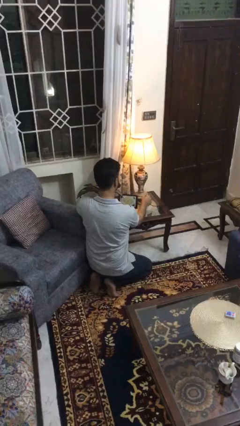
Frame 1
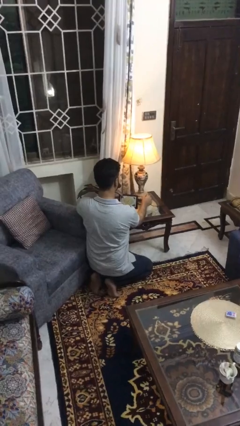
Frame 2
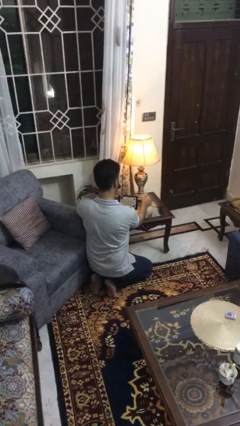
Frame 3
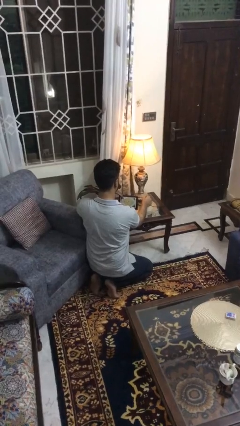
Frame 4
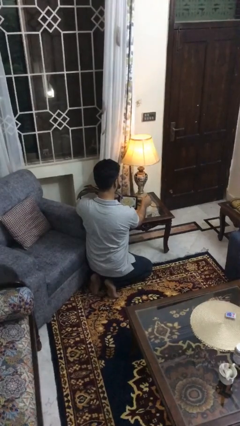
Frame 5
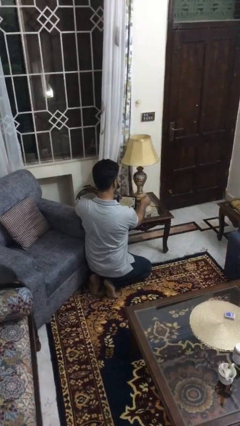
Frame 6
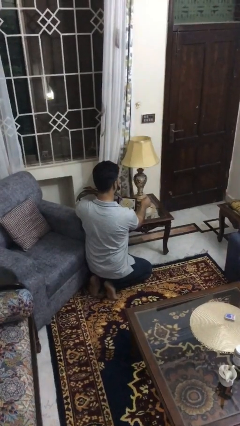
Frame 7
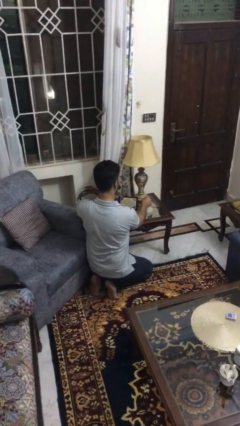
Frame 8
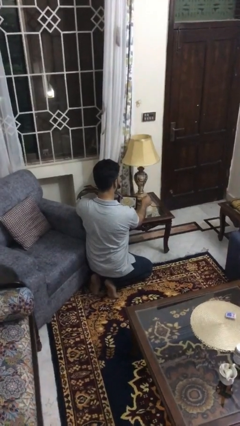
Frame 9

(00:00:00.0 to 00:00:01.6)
person turns off lamp

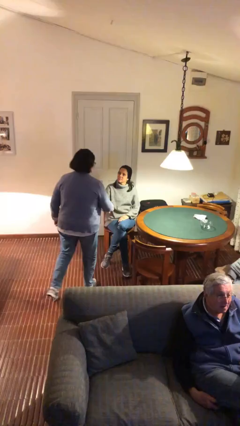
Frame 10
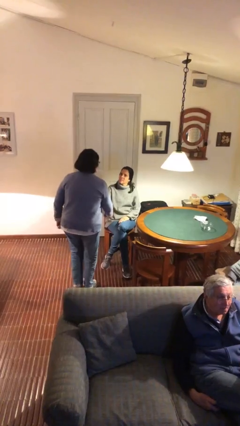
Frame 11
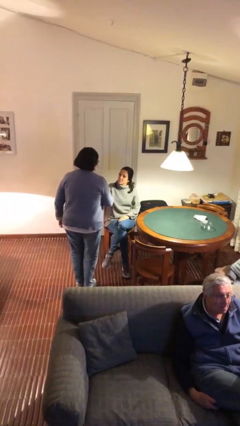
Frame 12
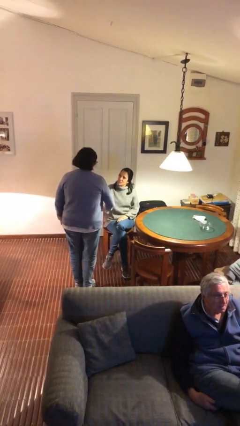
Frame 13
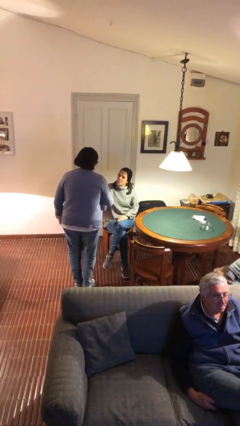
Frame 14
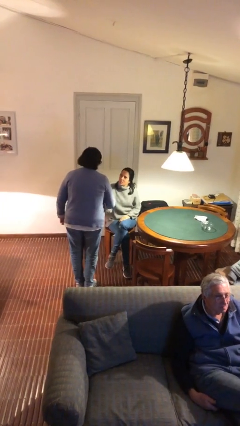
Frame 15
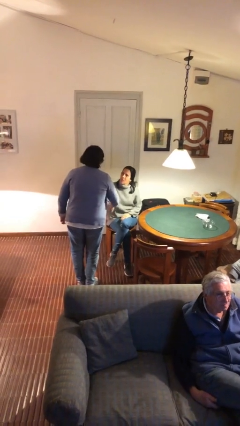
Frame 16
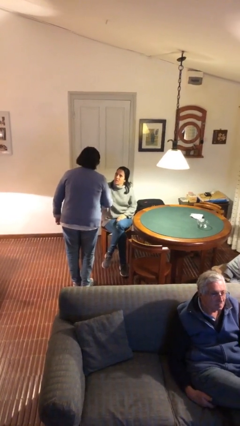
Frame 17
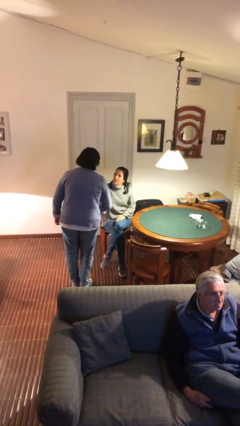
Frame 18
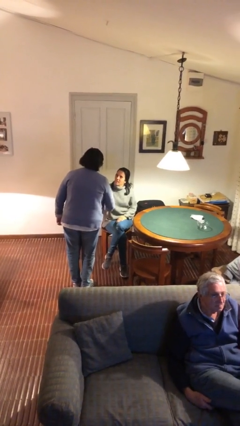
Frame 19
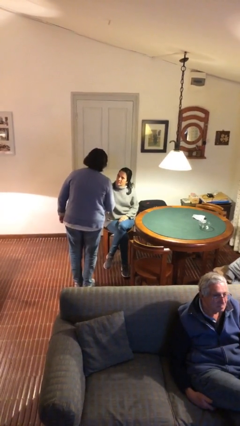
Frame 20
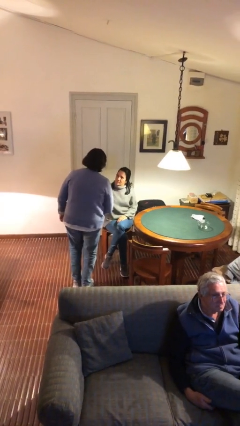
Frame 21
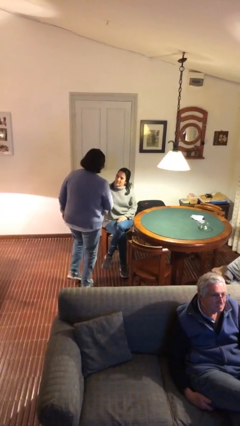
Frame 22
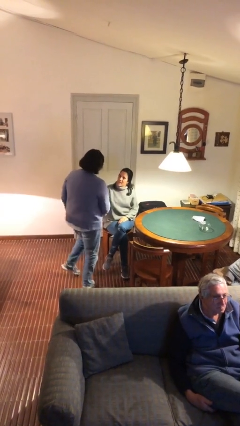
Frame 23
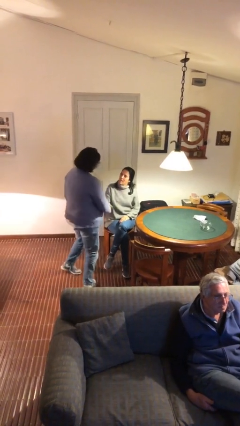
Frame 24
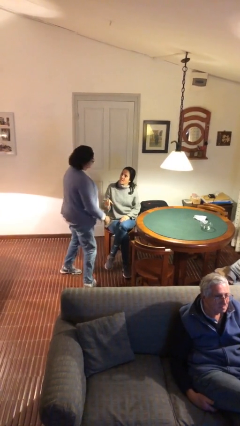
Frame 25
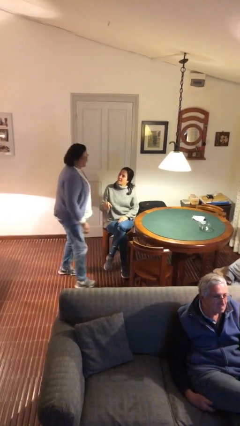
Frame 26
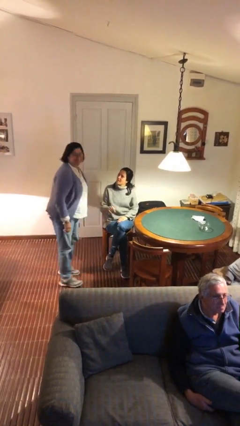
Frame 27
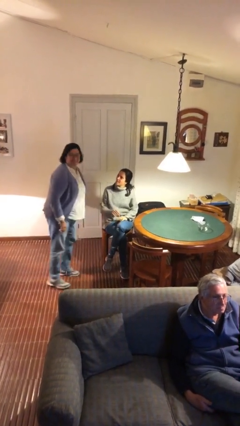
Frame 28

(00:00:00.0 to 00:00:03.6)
person shakes hand

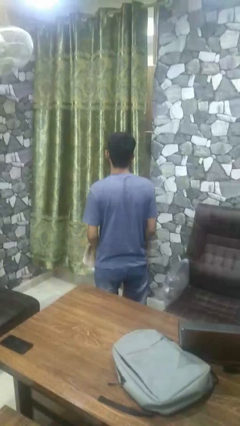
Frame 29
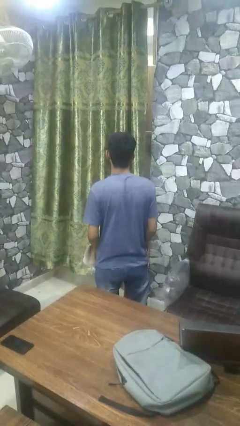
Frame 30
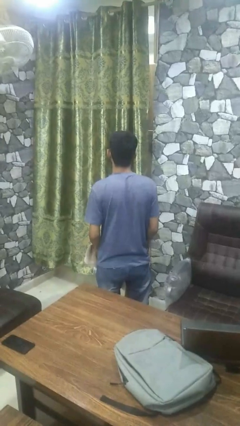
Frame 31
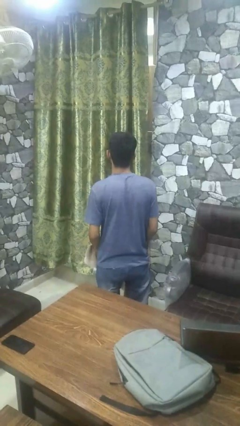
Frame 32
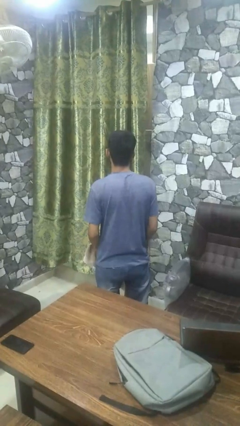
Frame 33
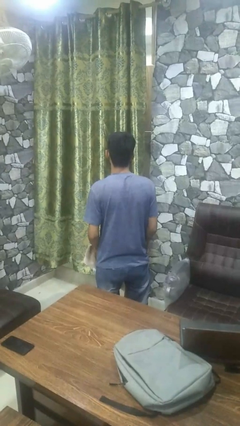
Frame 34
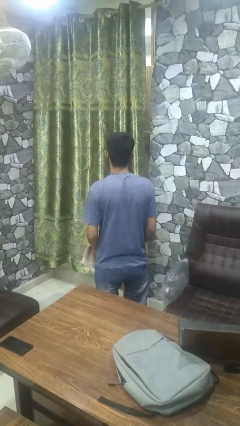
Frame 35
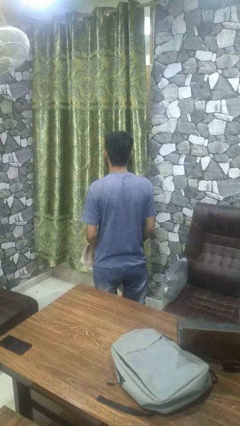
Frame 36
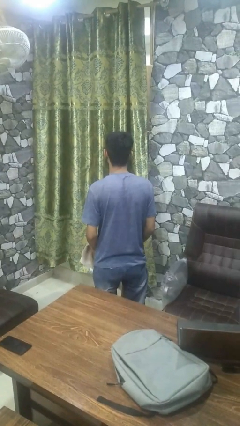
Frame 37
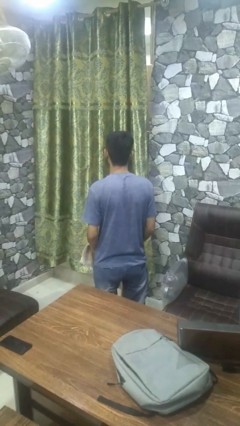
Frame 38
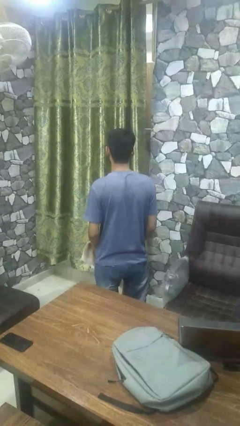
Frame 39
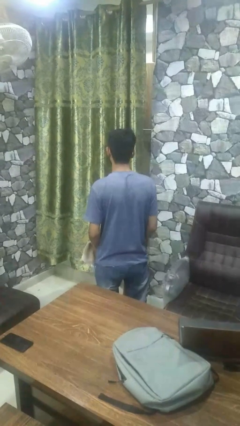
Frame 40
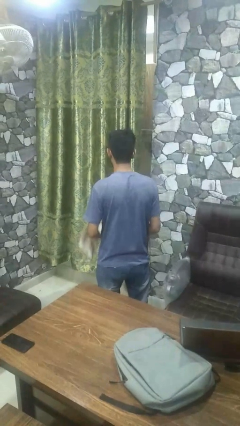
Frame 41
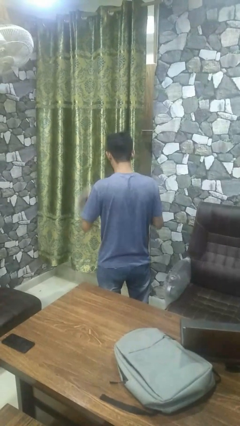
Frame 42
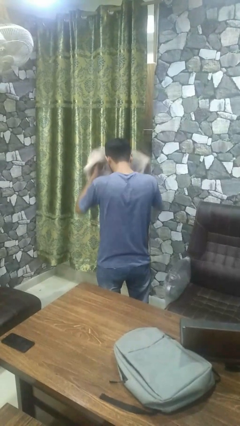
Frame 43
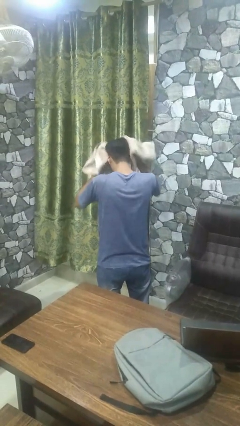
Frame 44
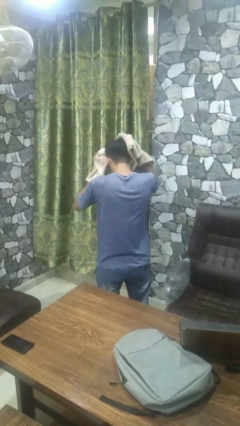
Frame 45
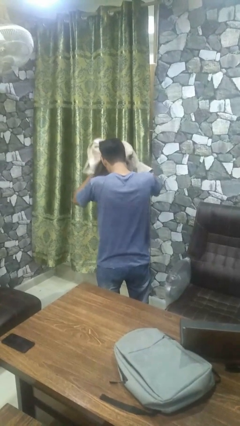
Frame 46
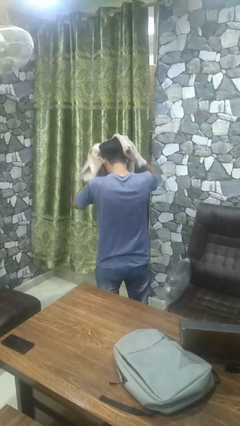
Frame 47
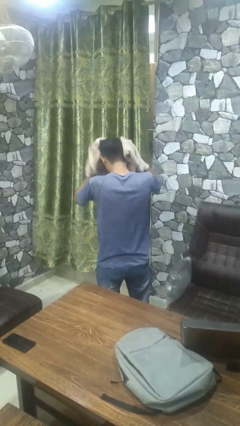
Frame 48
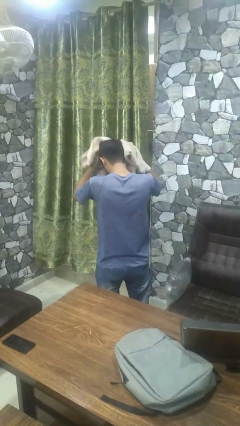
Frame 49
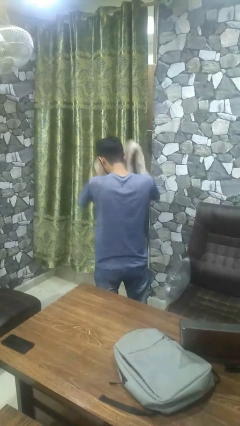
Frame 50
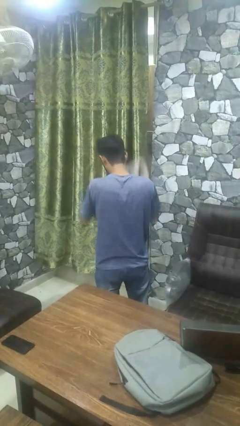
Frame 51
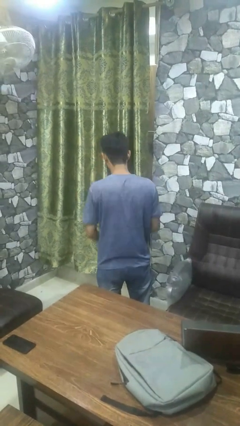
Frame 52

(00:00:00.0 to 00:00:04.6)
person dries hair with towel

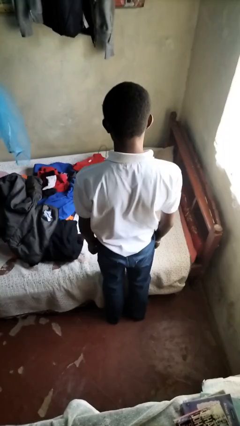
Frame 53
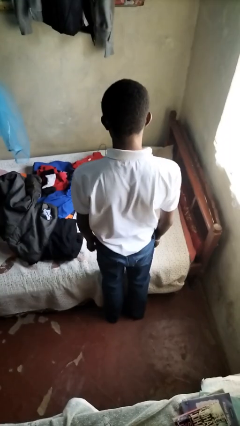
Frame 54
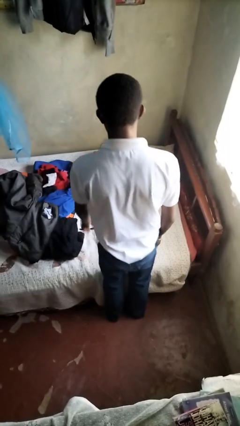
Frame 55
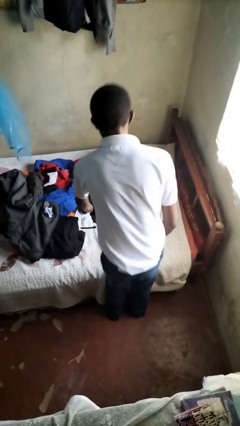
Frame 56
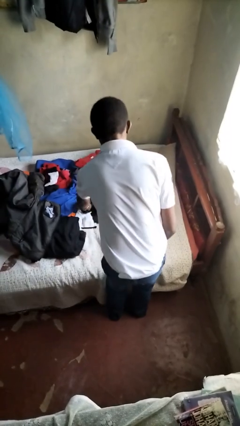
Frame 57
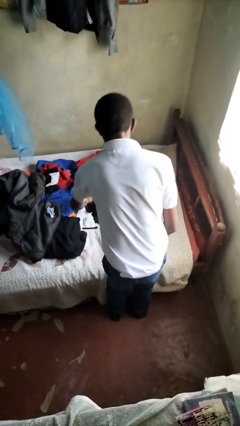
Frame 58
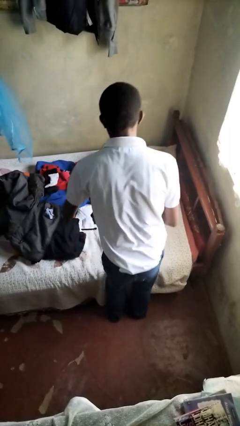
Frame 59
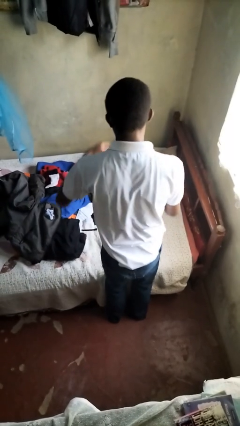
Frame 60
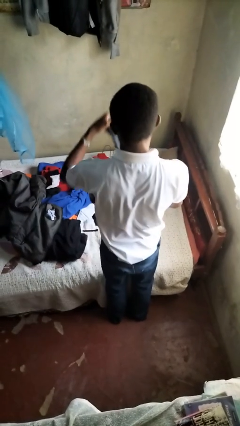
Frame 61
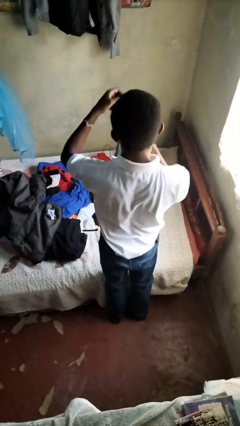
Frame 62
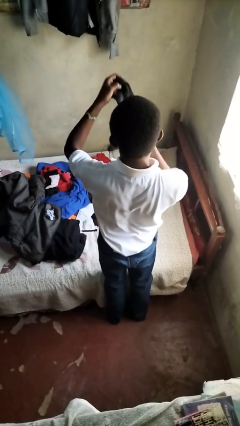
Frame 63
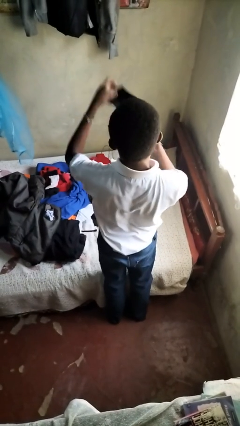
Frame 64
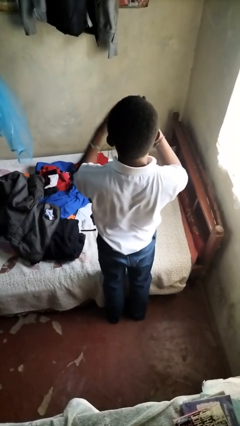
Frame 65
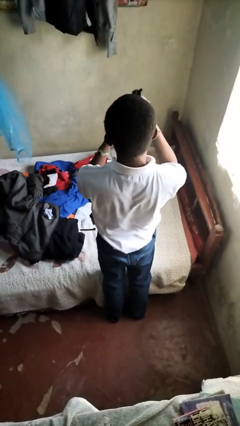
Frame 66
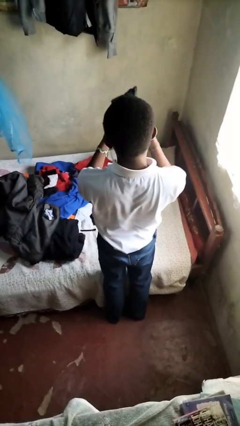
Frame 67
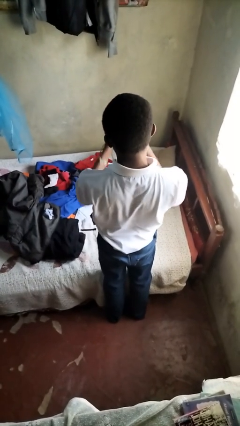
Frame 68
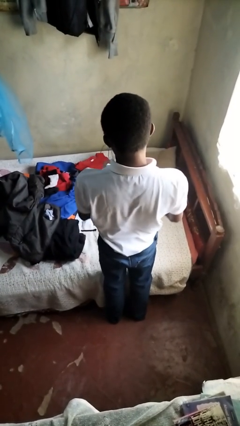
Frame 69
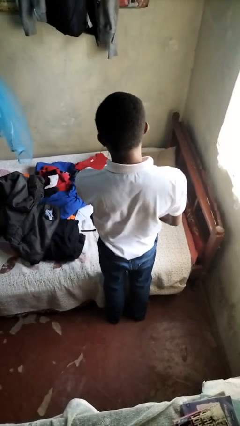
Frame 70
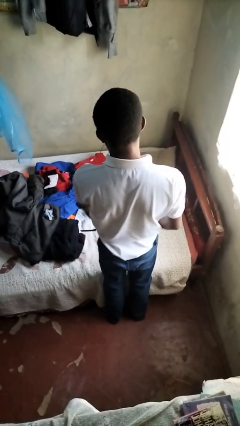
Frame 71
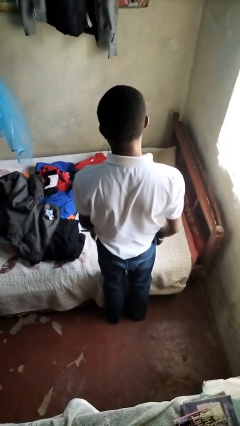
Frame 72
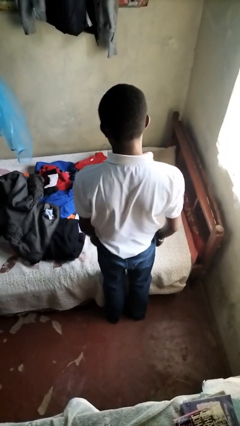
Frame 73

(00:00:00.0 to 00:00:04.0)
person folds socks

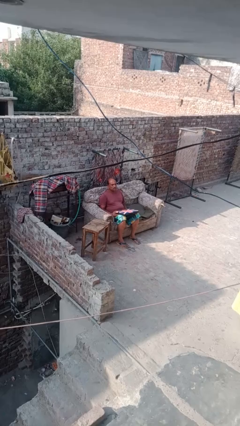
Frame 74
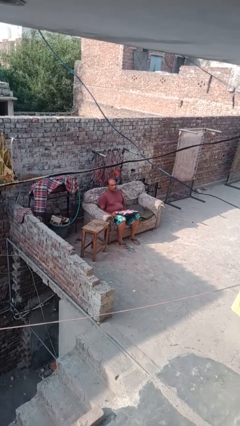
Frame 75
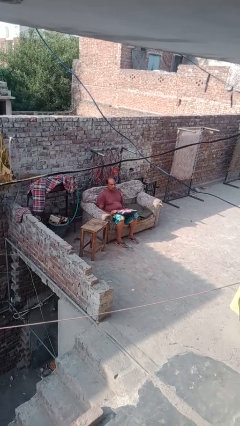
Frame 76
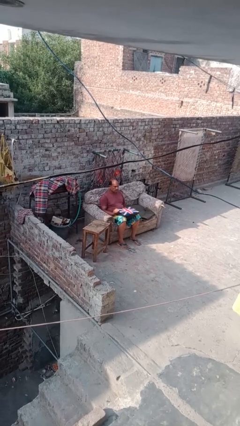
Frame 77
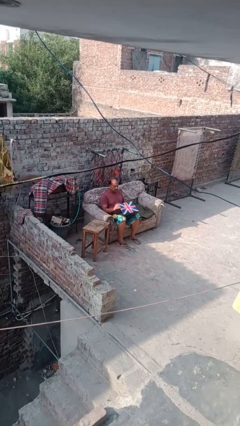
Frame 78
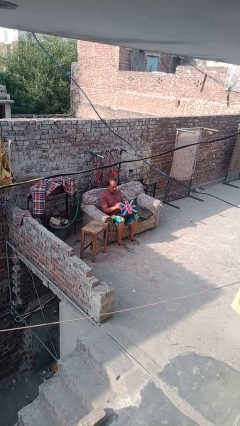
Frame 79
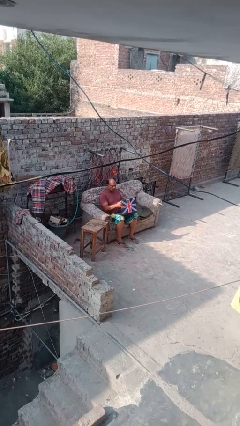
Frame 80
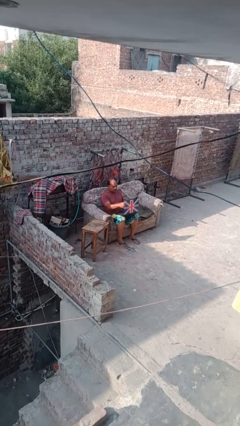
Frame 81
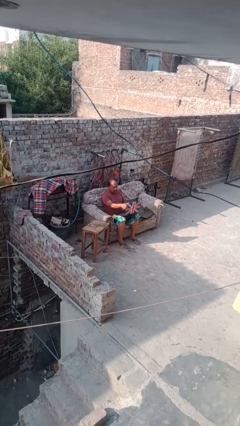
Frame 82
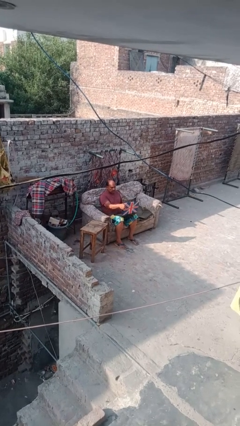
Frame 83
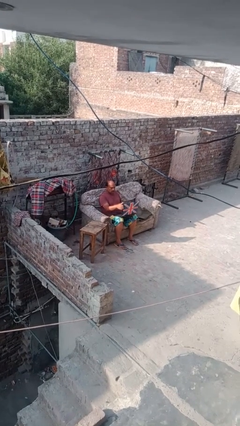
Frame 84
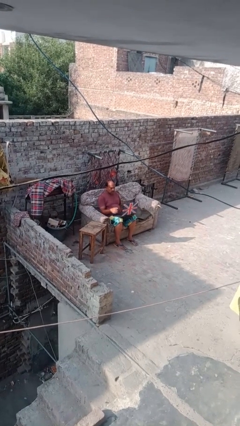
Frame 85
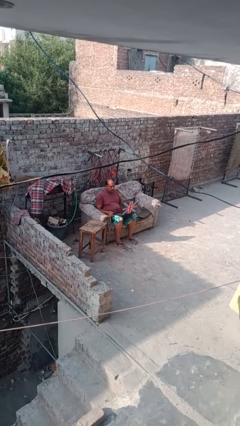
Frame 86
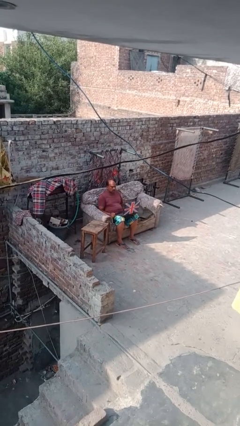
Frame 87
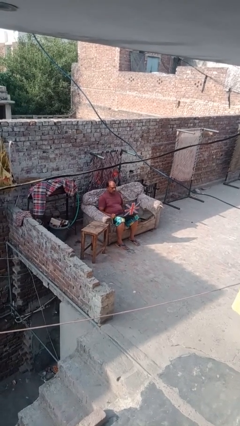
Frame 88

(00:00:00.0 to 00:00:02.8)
person opens laptop

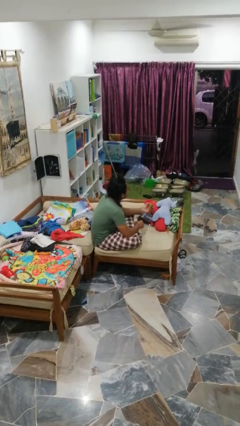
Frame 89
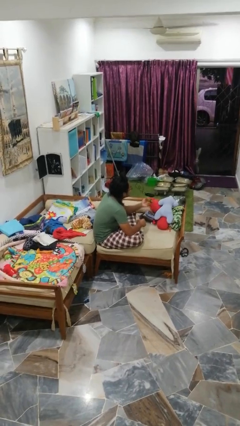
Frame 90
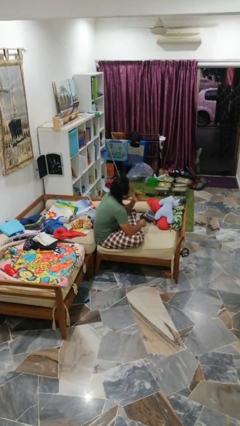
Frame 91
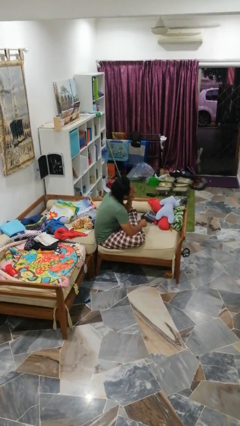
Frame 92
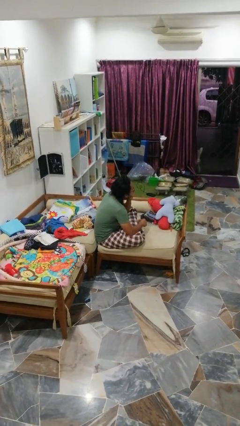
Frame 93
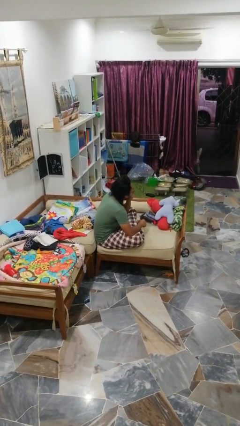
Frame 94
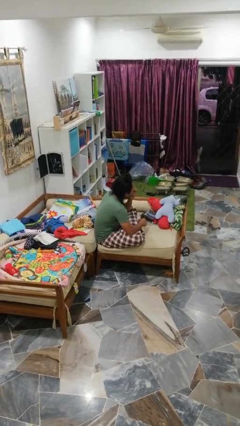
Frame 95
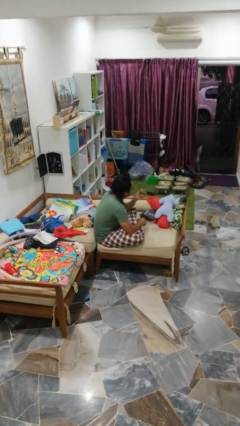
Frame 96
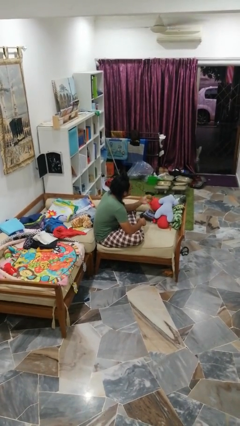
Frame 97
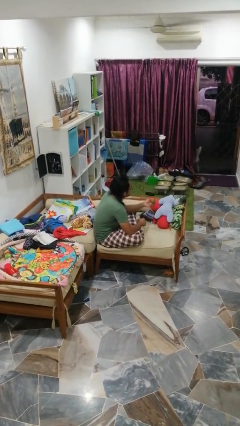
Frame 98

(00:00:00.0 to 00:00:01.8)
person eats apple
